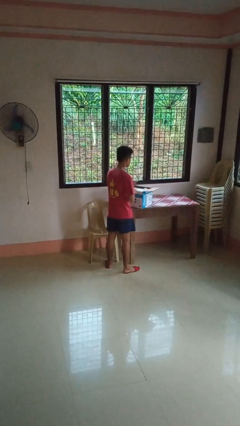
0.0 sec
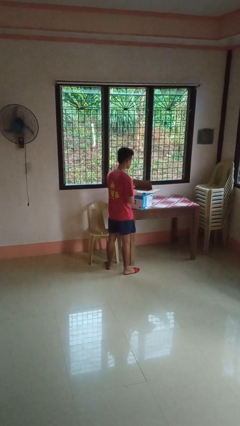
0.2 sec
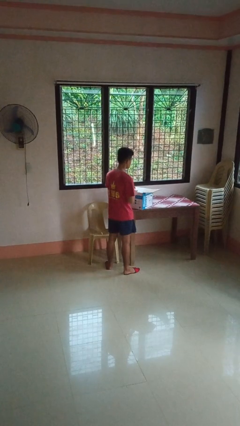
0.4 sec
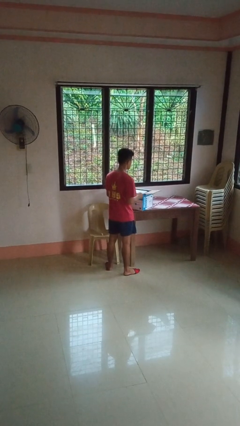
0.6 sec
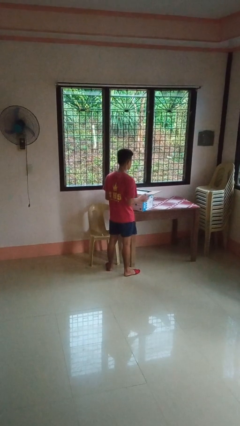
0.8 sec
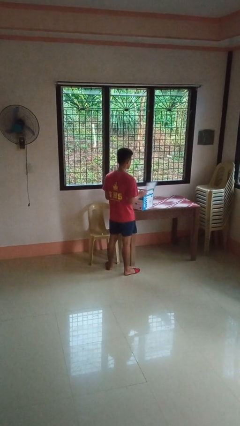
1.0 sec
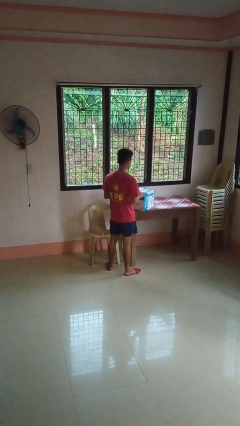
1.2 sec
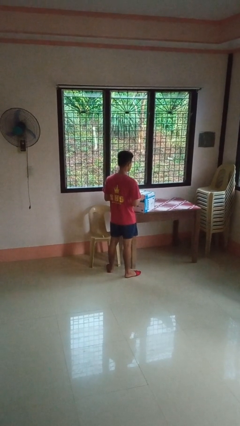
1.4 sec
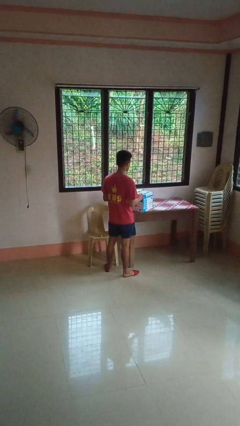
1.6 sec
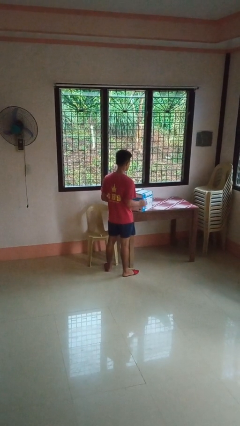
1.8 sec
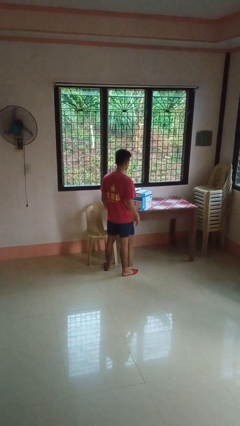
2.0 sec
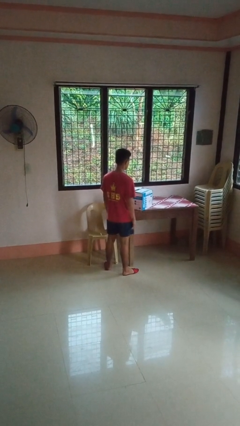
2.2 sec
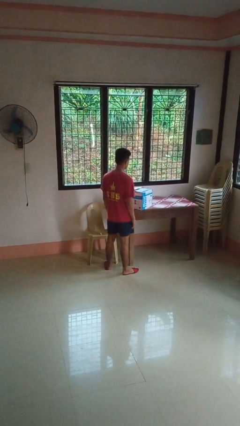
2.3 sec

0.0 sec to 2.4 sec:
person closes box

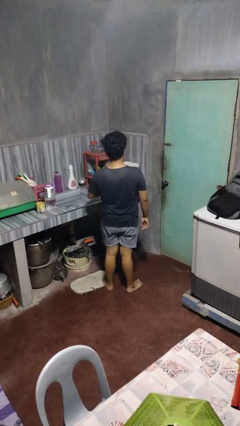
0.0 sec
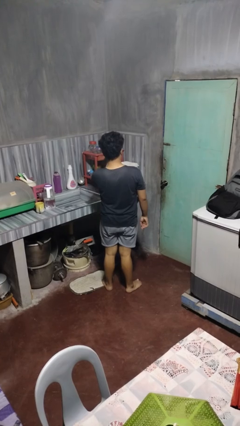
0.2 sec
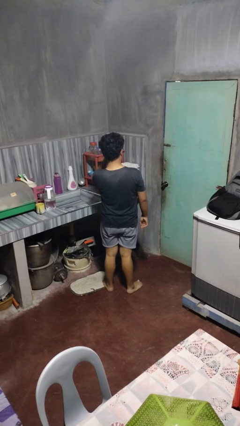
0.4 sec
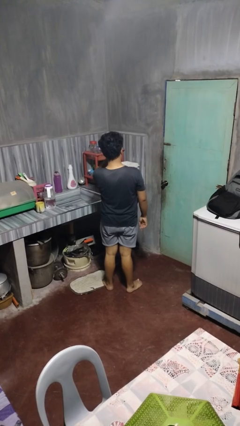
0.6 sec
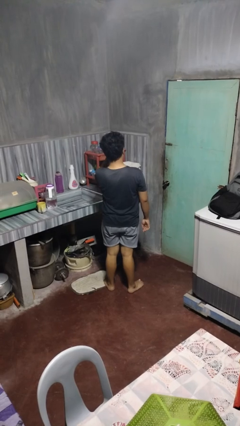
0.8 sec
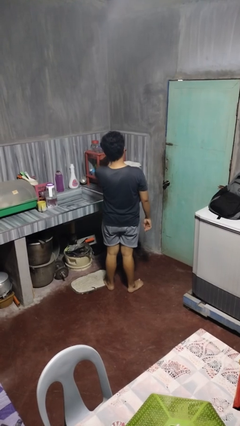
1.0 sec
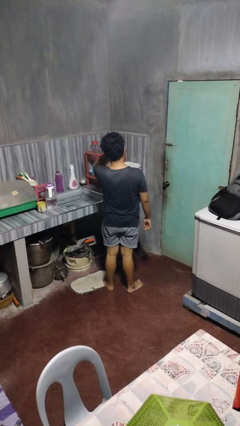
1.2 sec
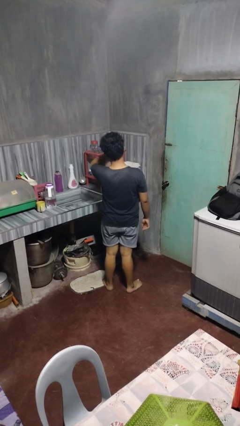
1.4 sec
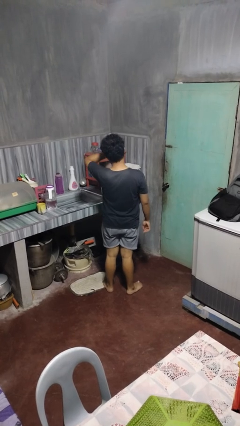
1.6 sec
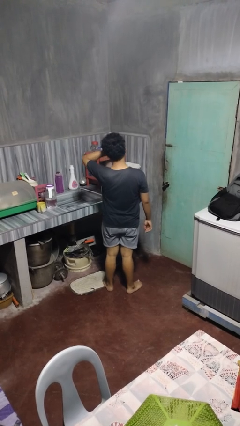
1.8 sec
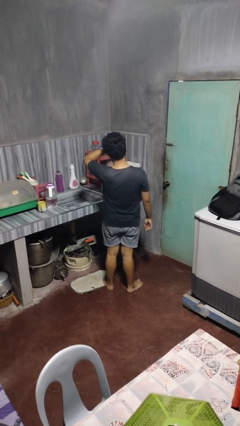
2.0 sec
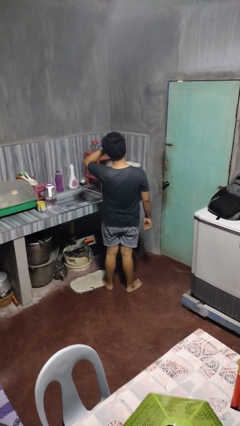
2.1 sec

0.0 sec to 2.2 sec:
person rubs eyes

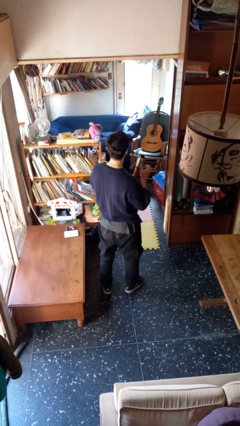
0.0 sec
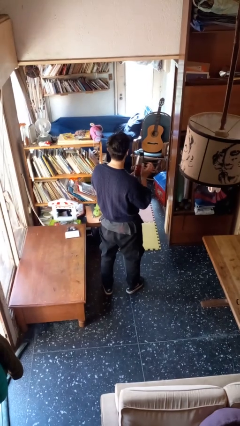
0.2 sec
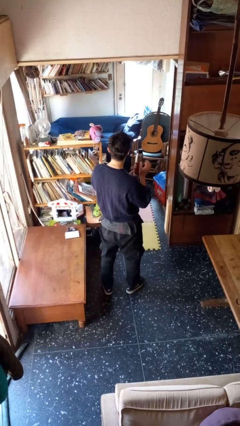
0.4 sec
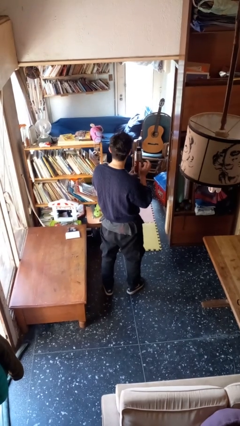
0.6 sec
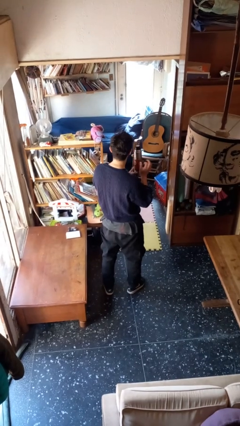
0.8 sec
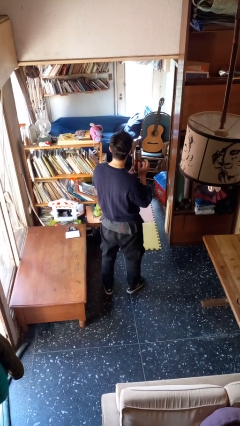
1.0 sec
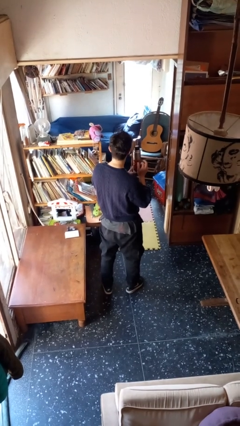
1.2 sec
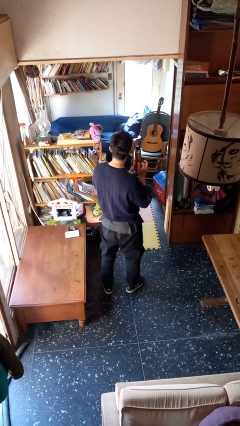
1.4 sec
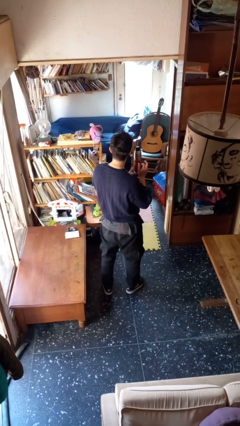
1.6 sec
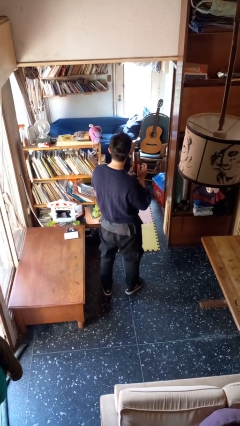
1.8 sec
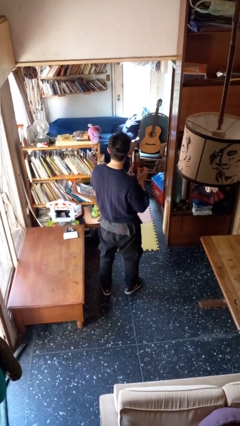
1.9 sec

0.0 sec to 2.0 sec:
person taps object with finger

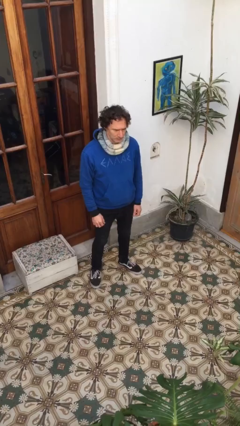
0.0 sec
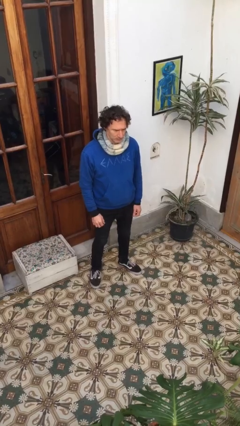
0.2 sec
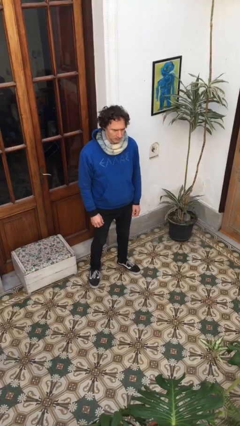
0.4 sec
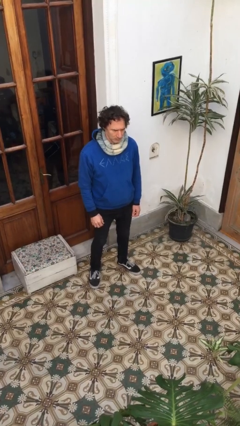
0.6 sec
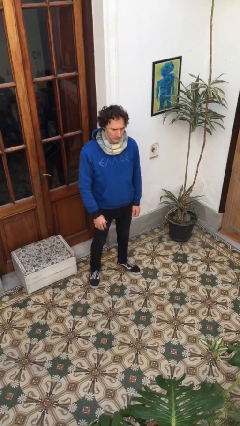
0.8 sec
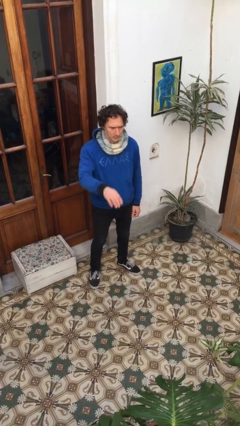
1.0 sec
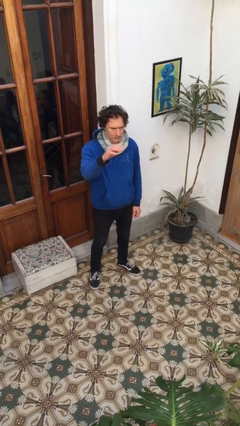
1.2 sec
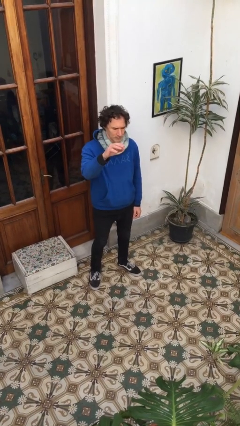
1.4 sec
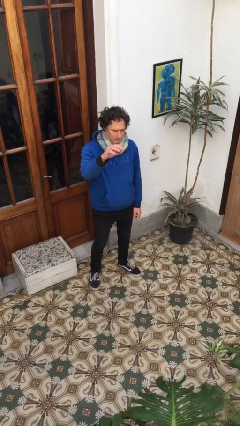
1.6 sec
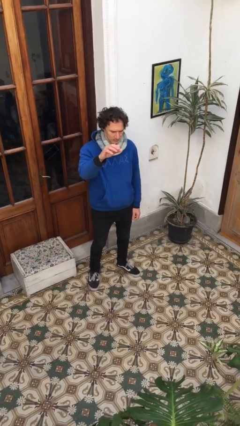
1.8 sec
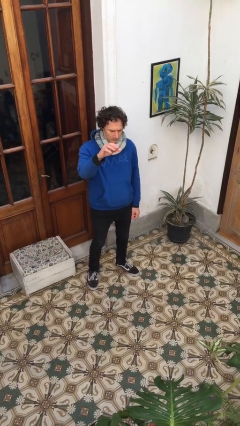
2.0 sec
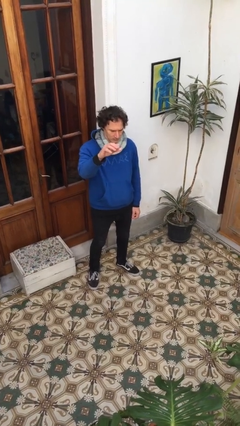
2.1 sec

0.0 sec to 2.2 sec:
person gestures swipe up

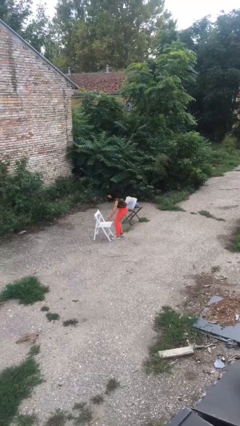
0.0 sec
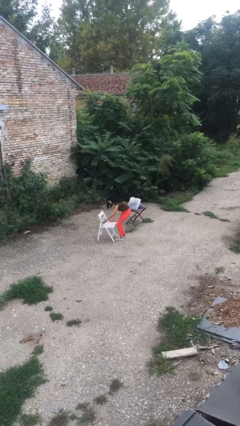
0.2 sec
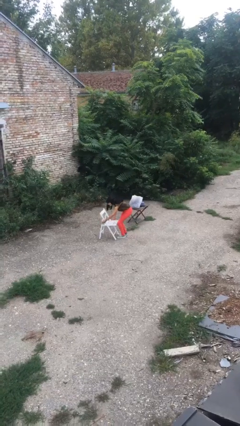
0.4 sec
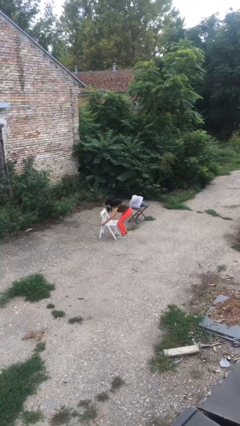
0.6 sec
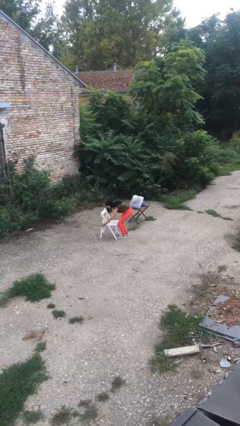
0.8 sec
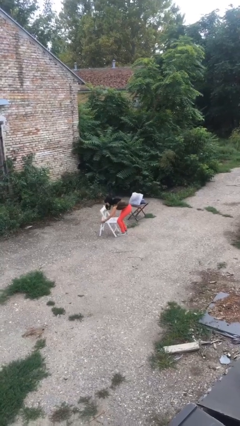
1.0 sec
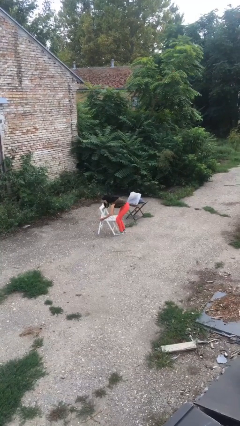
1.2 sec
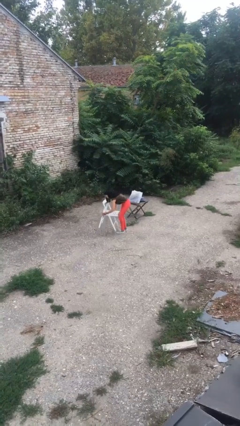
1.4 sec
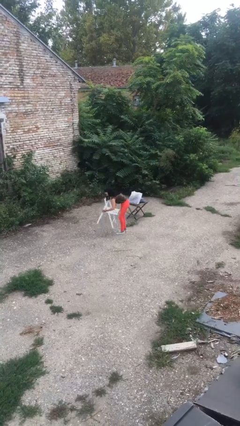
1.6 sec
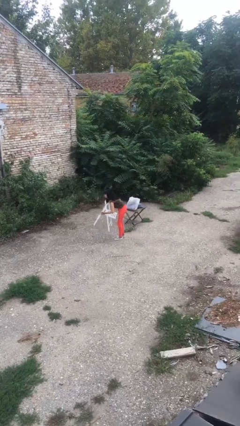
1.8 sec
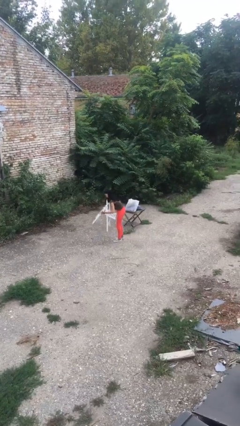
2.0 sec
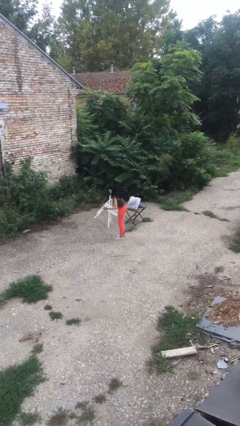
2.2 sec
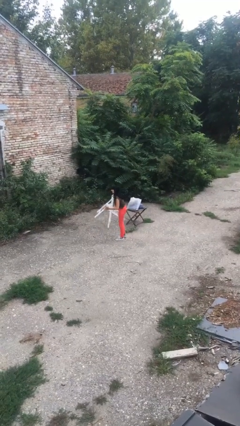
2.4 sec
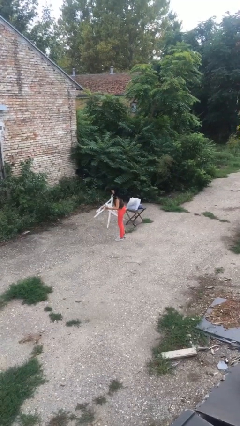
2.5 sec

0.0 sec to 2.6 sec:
person picks up object from floor

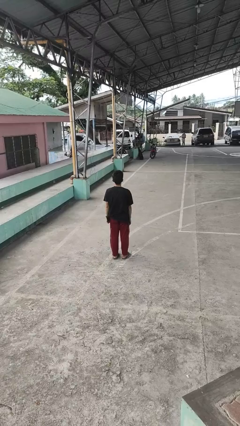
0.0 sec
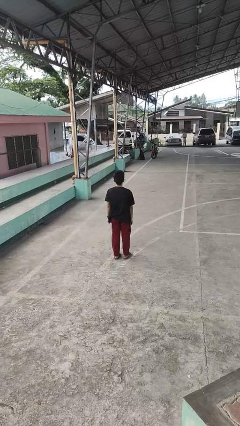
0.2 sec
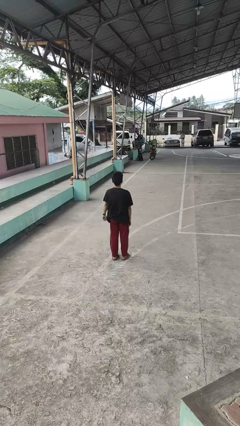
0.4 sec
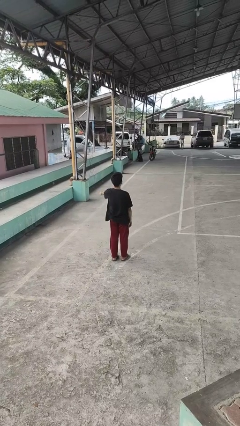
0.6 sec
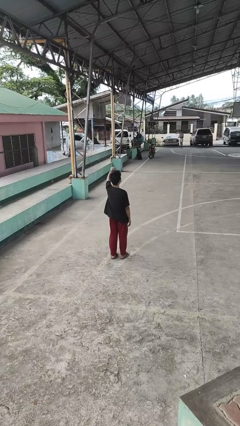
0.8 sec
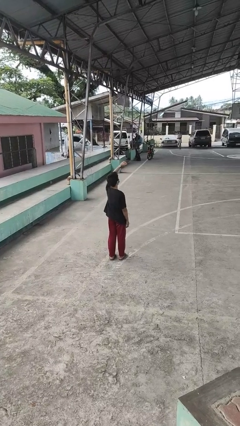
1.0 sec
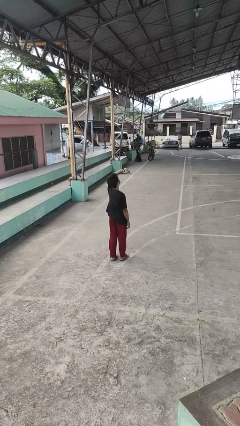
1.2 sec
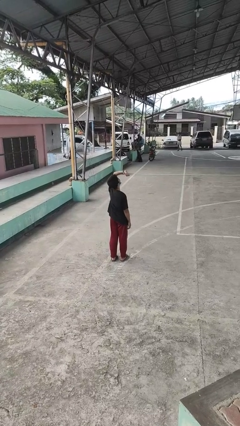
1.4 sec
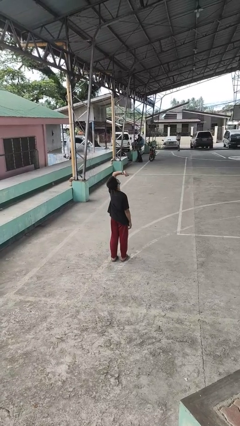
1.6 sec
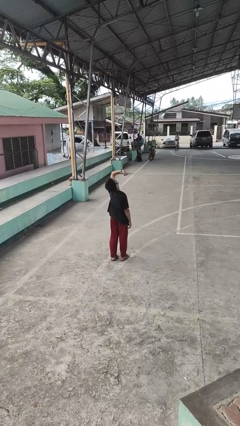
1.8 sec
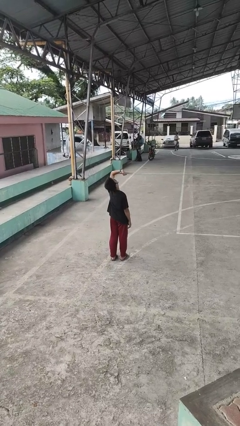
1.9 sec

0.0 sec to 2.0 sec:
person looks at wristwatch

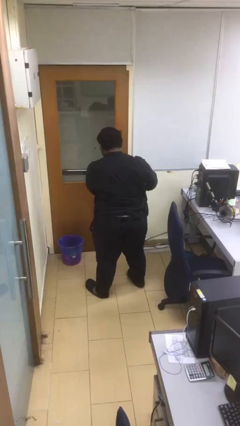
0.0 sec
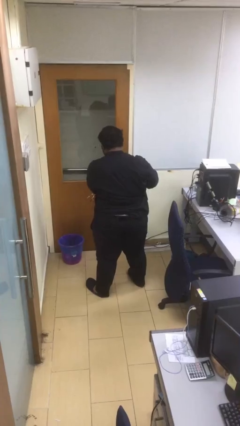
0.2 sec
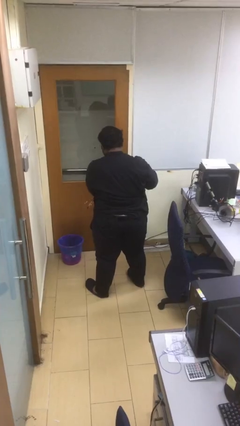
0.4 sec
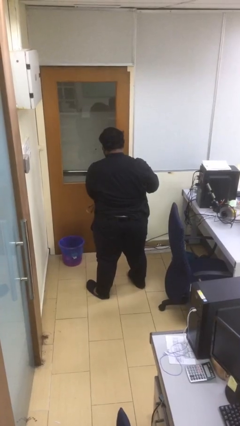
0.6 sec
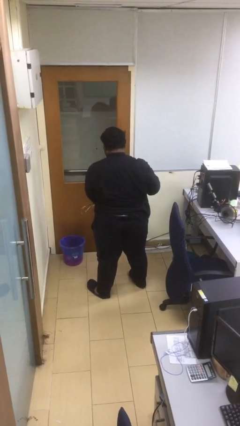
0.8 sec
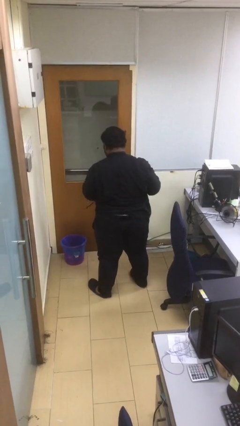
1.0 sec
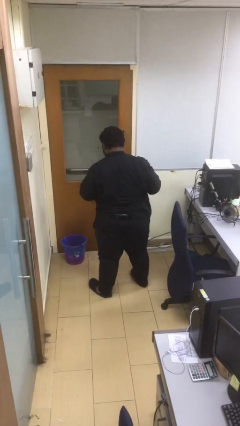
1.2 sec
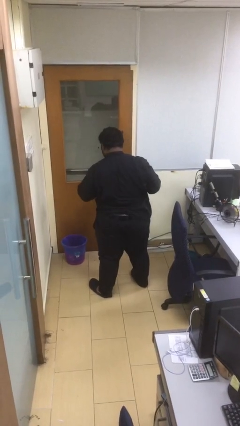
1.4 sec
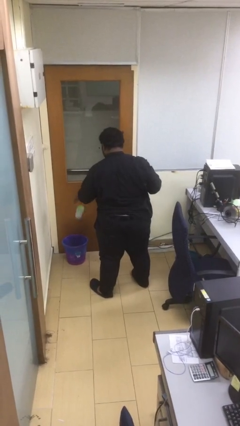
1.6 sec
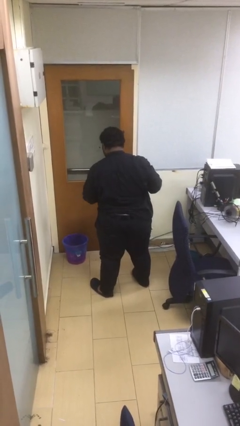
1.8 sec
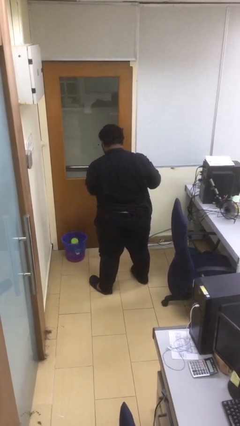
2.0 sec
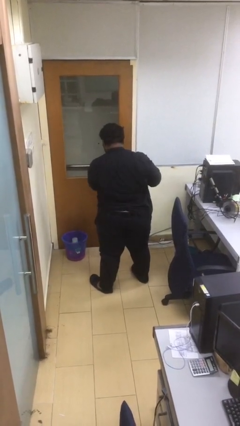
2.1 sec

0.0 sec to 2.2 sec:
person discards trash

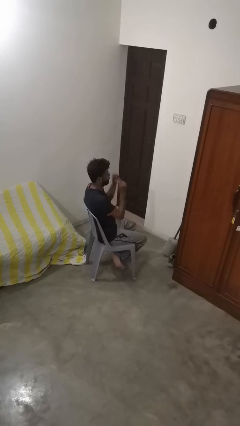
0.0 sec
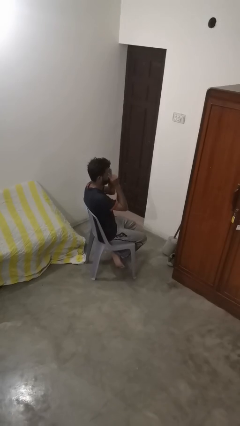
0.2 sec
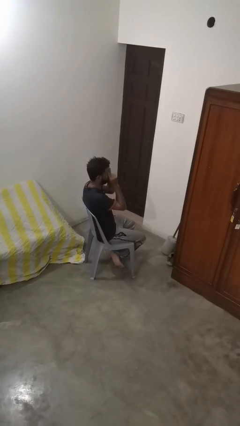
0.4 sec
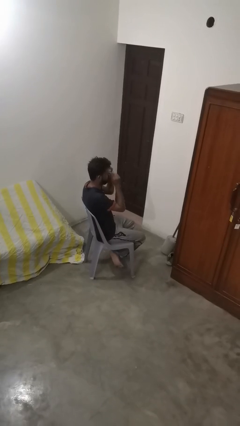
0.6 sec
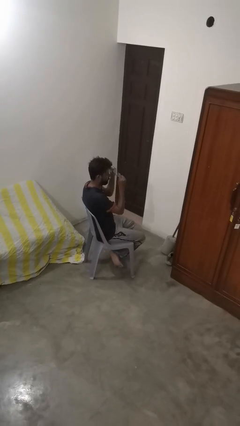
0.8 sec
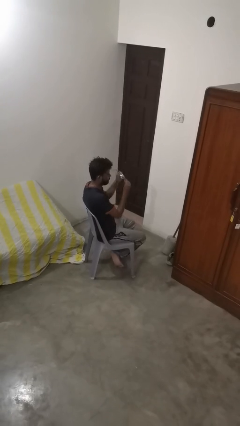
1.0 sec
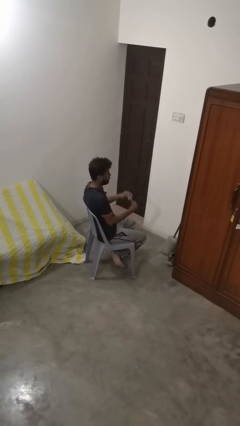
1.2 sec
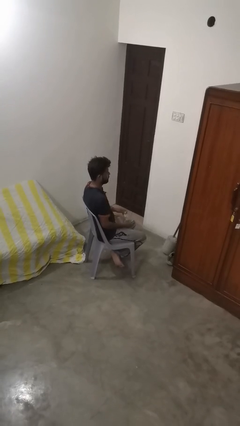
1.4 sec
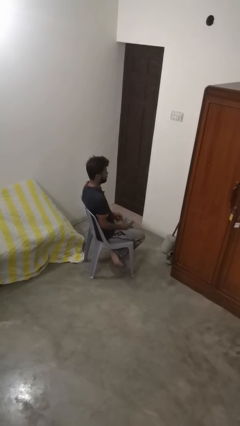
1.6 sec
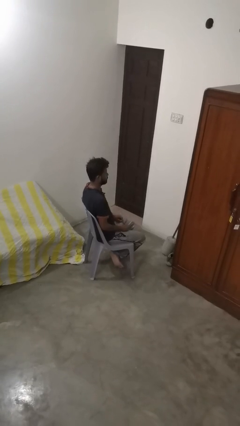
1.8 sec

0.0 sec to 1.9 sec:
person takes off glasses
